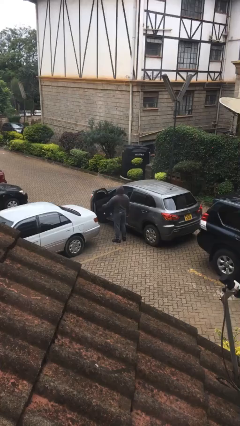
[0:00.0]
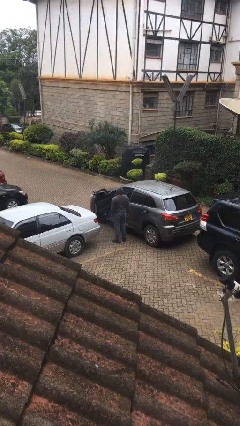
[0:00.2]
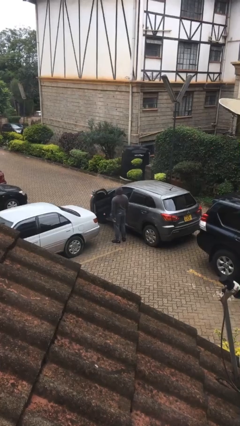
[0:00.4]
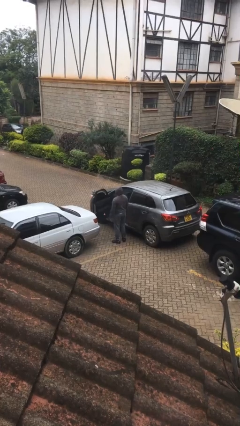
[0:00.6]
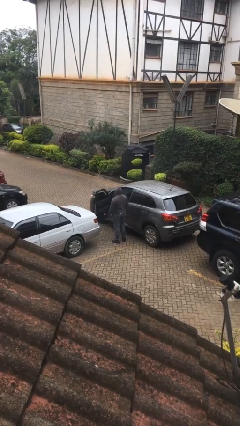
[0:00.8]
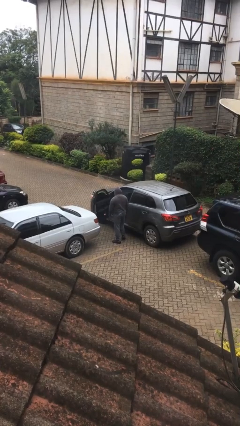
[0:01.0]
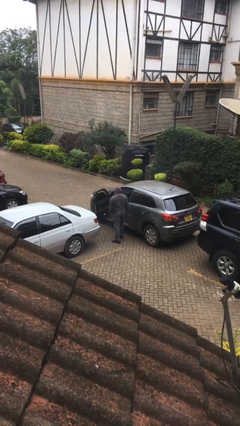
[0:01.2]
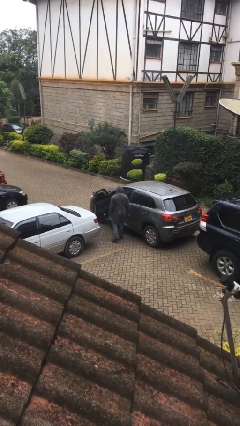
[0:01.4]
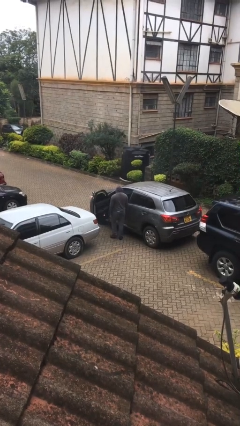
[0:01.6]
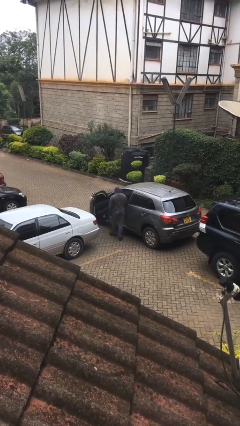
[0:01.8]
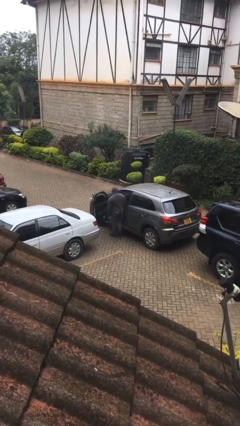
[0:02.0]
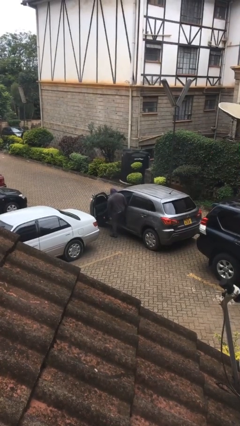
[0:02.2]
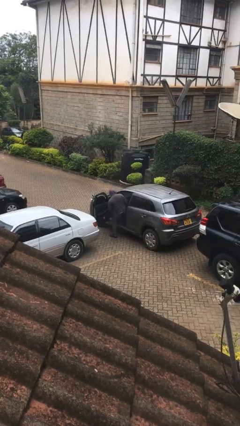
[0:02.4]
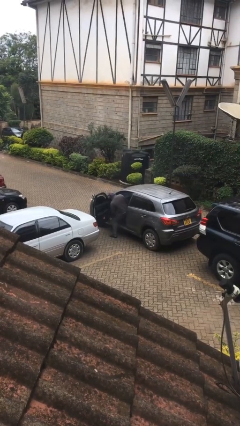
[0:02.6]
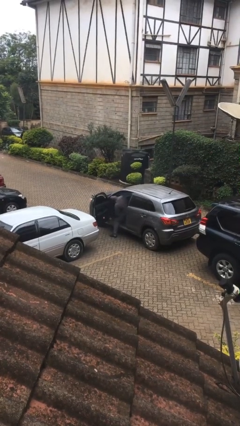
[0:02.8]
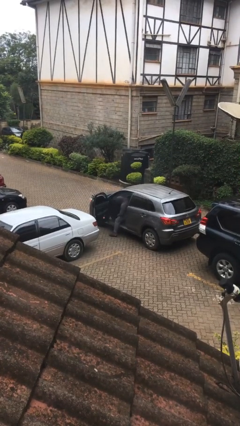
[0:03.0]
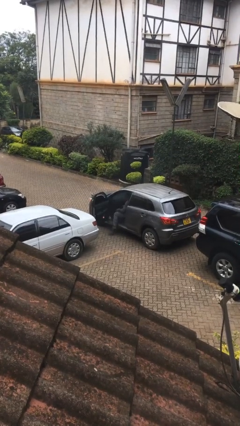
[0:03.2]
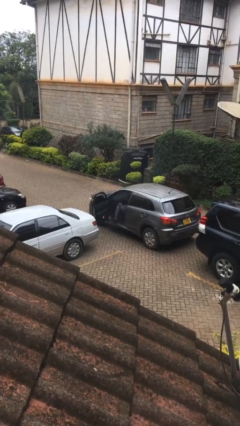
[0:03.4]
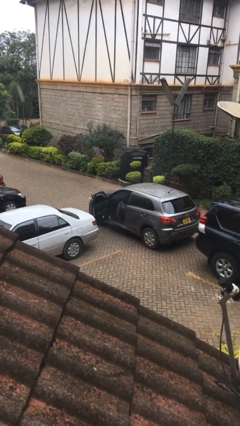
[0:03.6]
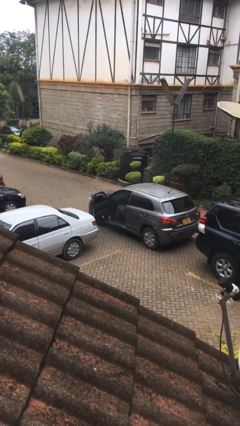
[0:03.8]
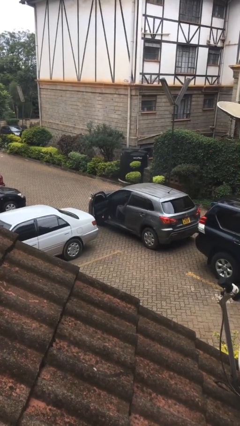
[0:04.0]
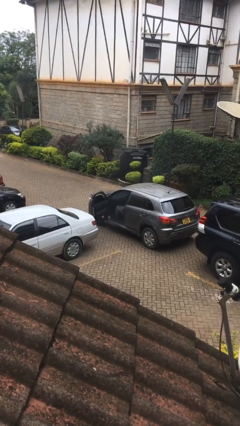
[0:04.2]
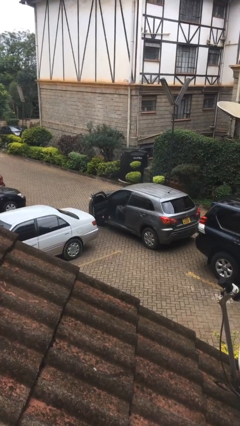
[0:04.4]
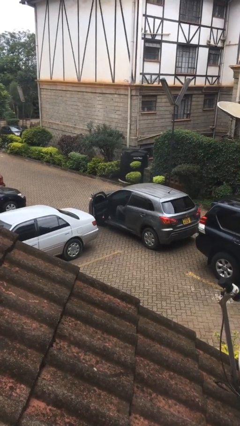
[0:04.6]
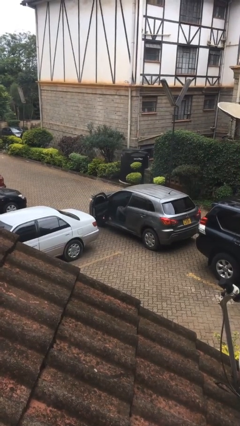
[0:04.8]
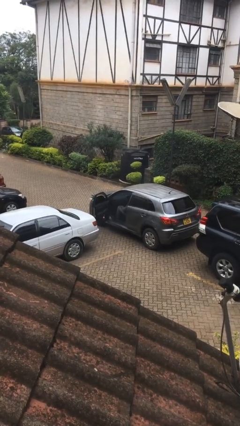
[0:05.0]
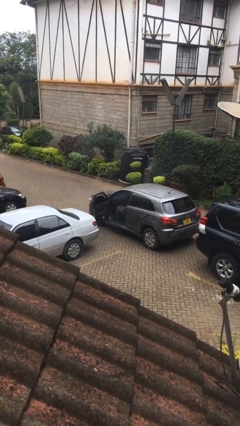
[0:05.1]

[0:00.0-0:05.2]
person enters car

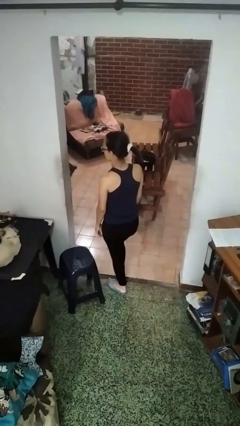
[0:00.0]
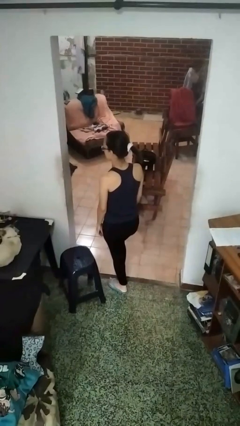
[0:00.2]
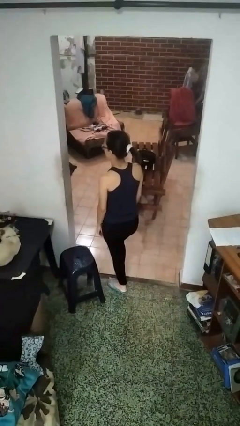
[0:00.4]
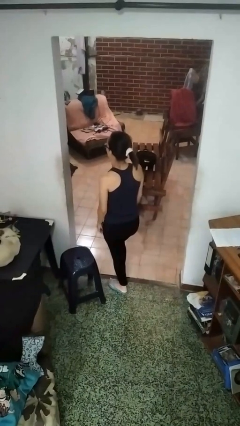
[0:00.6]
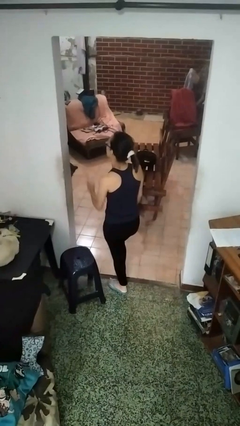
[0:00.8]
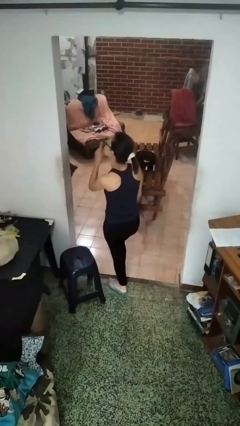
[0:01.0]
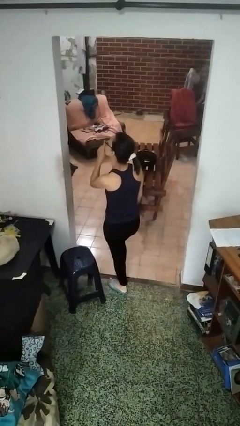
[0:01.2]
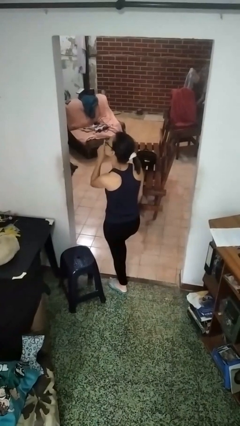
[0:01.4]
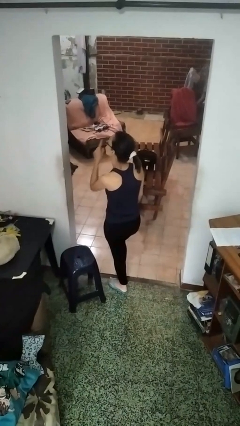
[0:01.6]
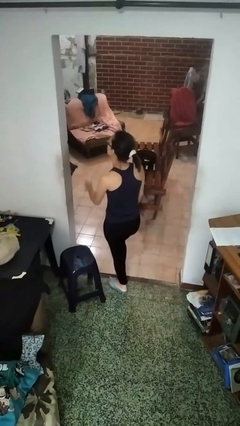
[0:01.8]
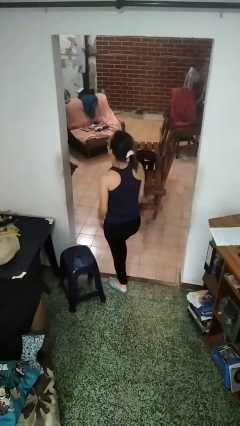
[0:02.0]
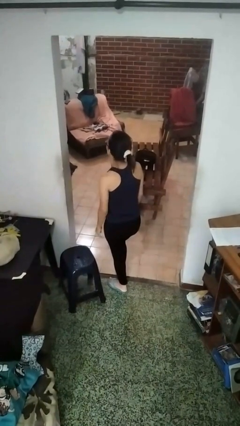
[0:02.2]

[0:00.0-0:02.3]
person gestures be quiet

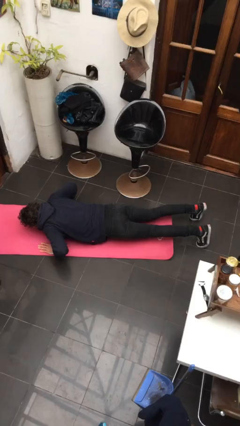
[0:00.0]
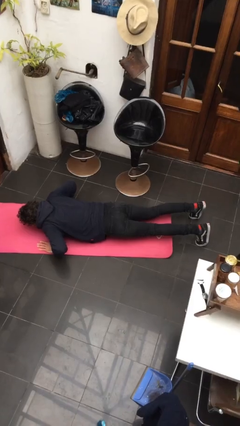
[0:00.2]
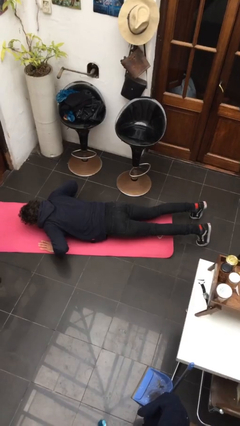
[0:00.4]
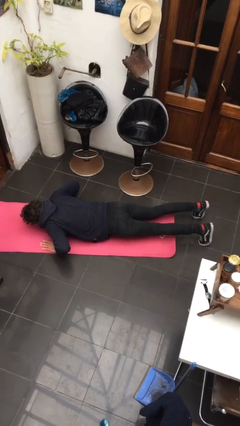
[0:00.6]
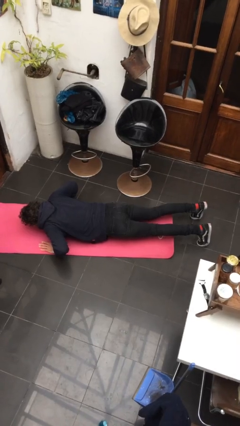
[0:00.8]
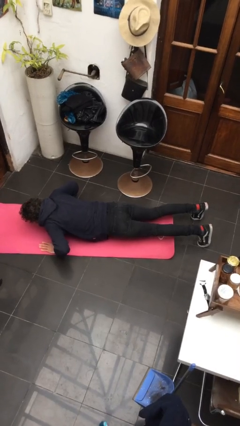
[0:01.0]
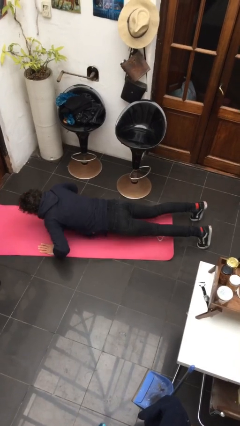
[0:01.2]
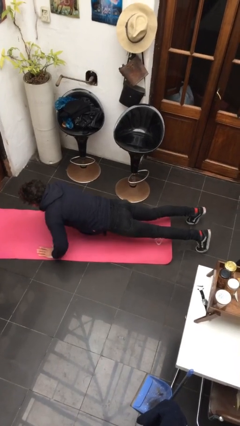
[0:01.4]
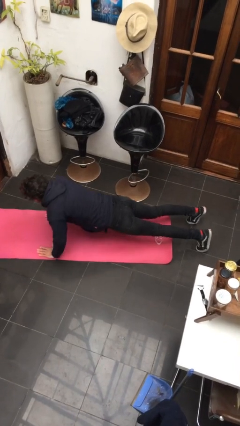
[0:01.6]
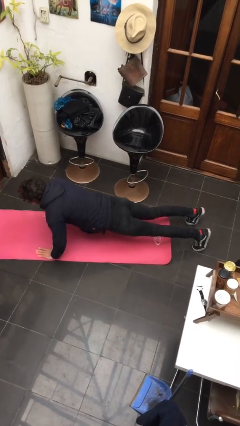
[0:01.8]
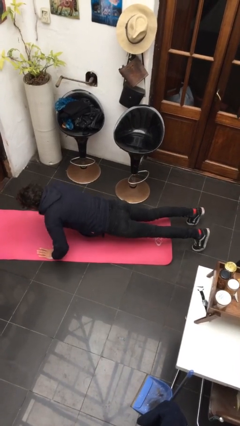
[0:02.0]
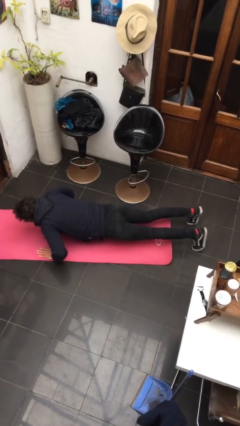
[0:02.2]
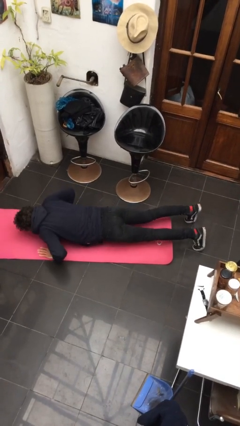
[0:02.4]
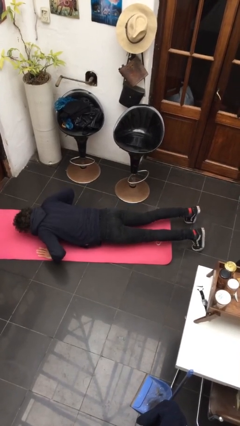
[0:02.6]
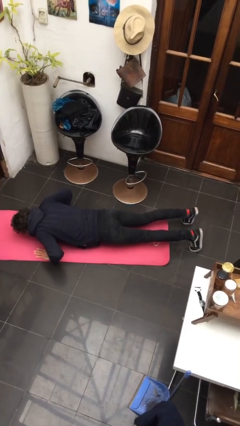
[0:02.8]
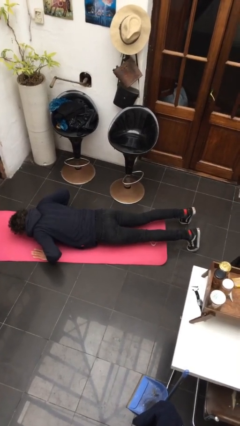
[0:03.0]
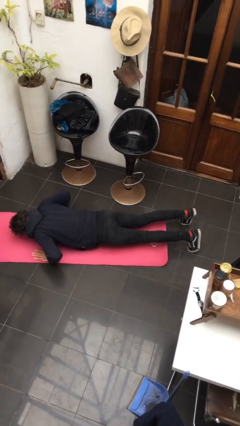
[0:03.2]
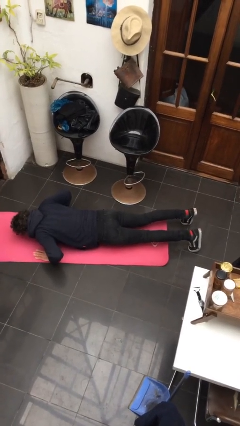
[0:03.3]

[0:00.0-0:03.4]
person exercises with pushup

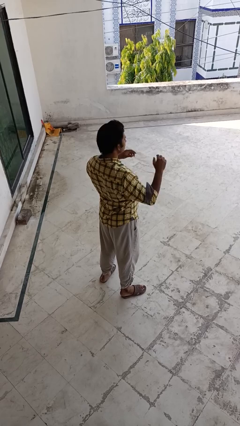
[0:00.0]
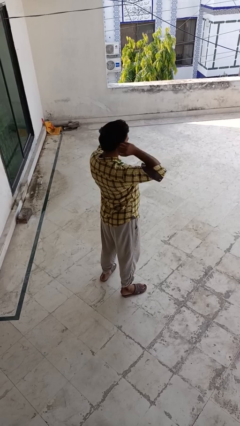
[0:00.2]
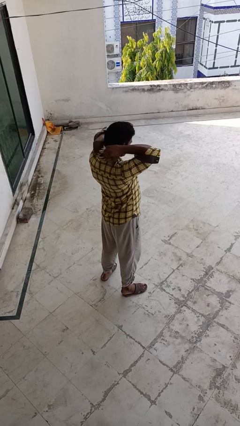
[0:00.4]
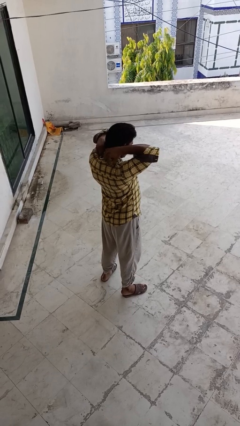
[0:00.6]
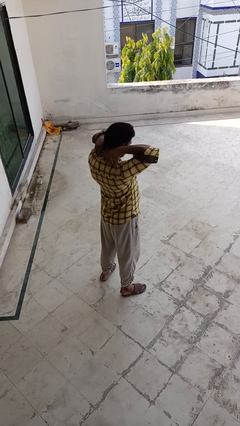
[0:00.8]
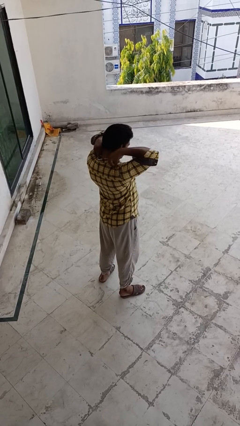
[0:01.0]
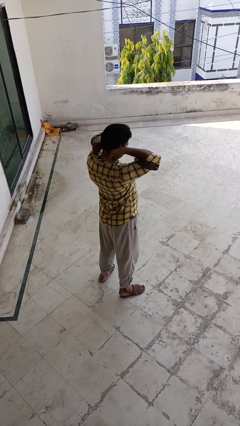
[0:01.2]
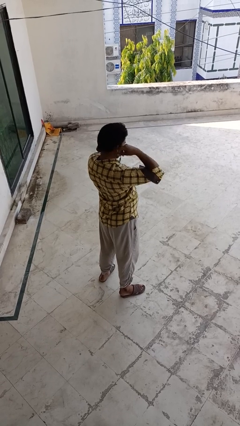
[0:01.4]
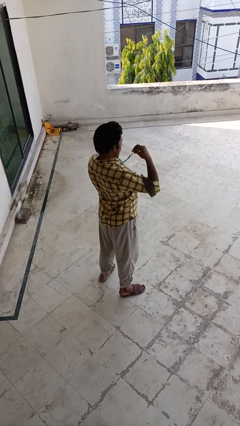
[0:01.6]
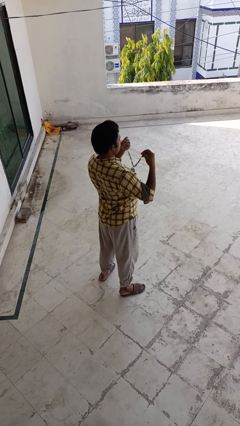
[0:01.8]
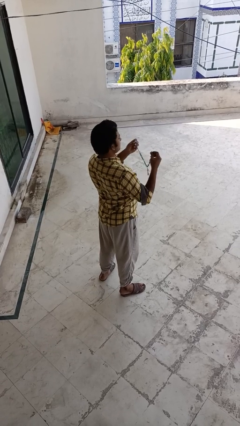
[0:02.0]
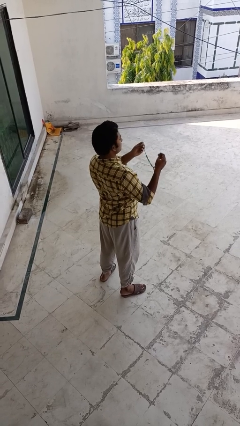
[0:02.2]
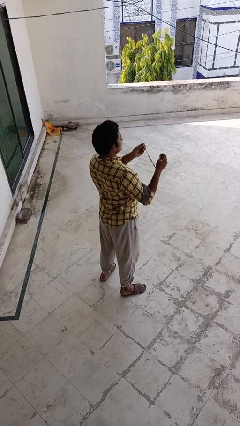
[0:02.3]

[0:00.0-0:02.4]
person takes off necklace

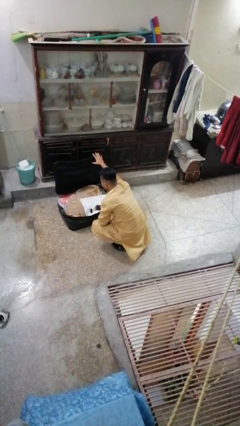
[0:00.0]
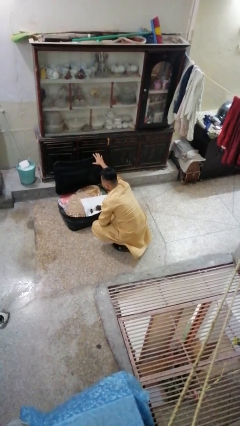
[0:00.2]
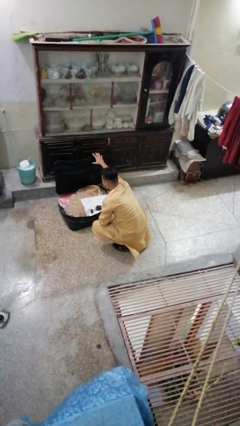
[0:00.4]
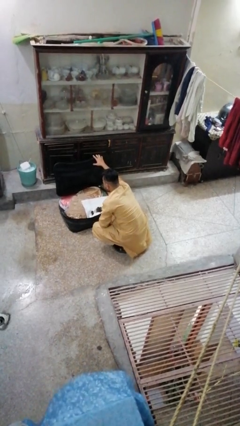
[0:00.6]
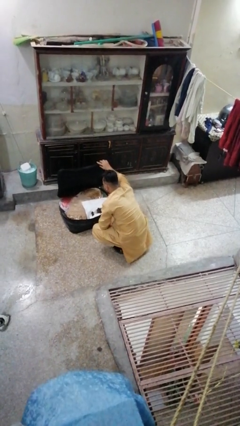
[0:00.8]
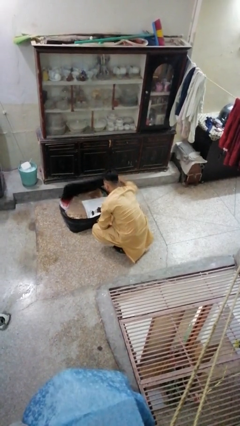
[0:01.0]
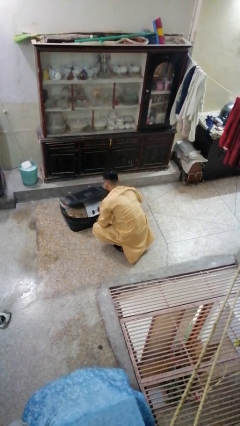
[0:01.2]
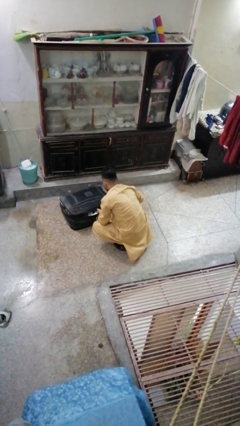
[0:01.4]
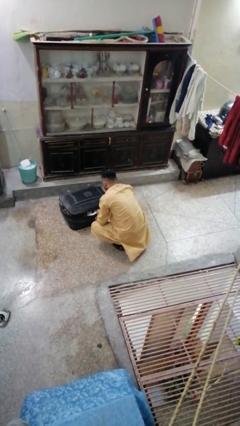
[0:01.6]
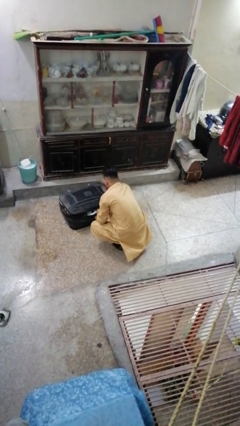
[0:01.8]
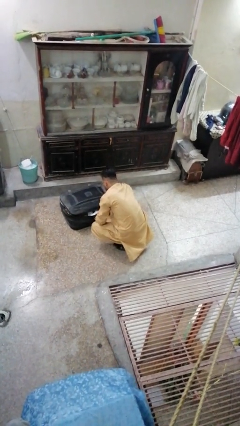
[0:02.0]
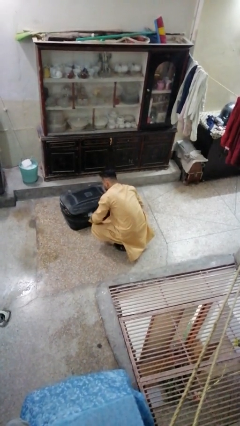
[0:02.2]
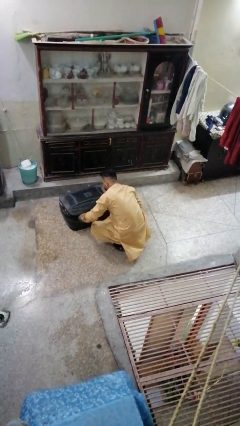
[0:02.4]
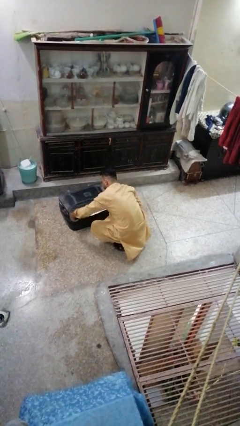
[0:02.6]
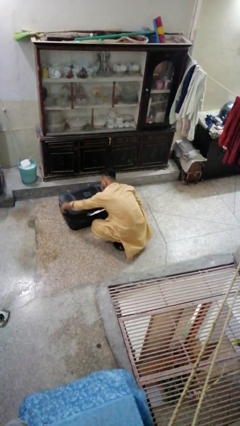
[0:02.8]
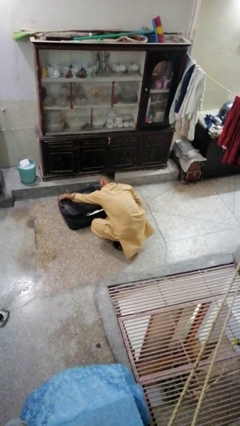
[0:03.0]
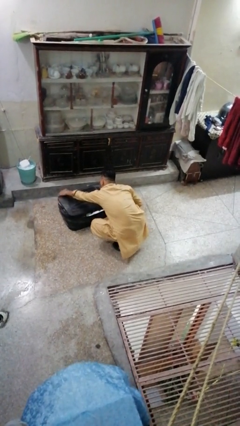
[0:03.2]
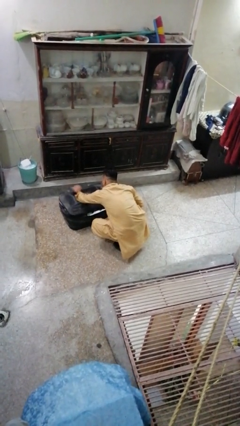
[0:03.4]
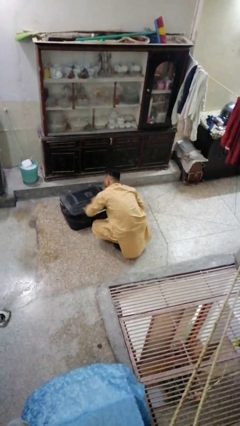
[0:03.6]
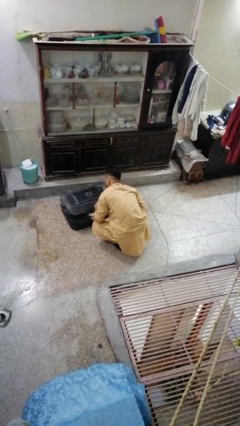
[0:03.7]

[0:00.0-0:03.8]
person closes suitcase

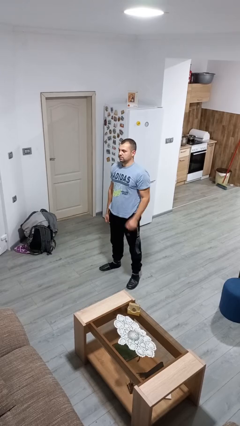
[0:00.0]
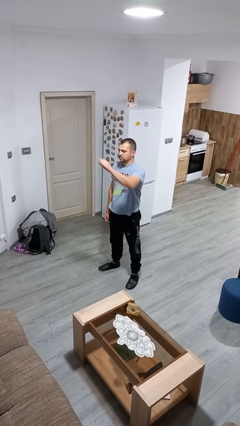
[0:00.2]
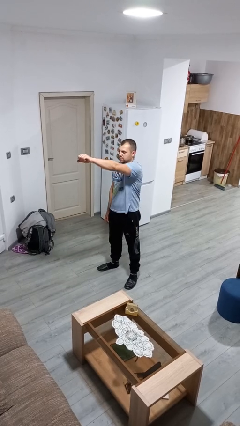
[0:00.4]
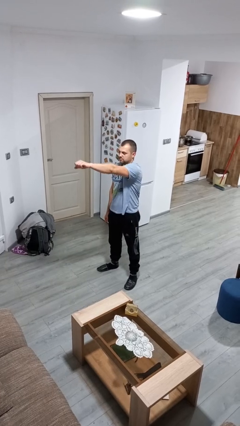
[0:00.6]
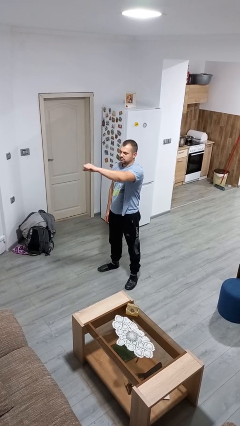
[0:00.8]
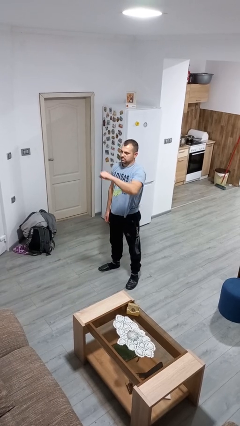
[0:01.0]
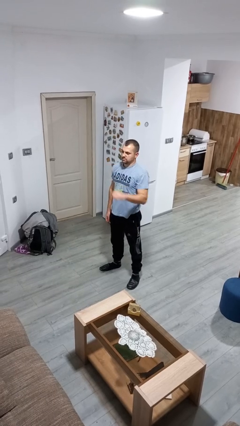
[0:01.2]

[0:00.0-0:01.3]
person punches
